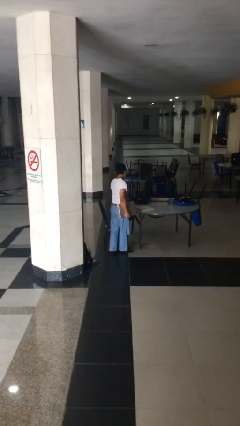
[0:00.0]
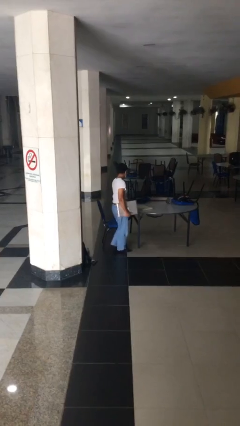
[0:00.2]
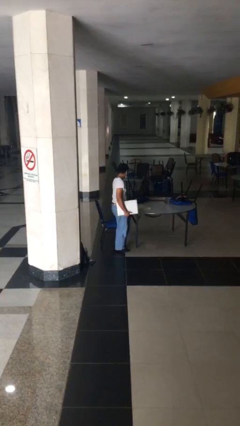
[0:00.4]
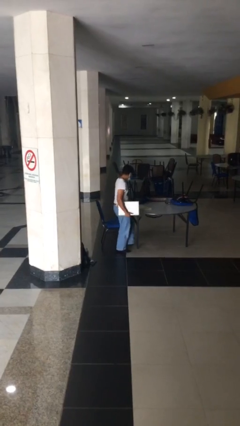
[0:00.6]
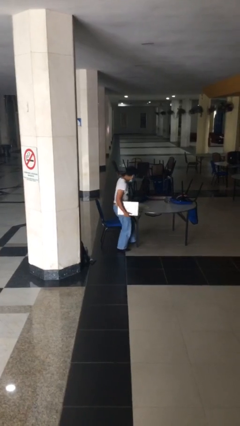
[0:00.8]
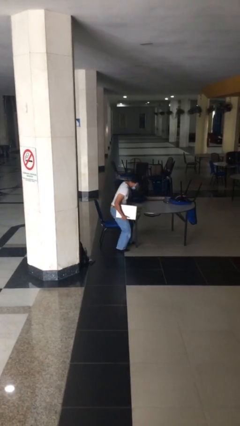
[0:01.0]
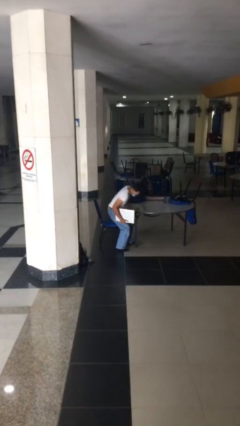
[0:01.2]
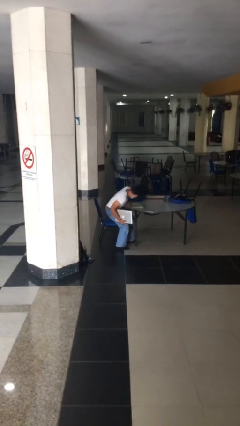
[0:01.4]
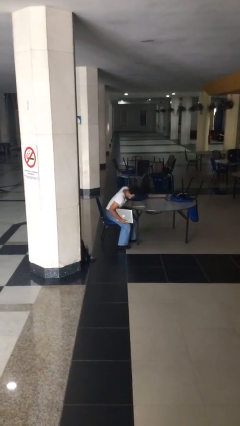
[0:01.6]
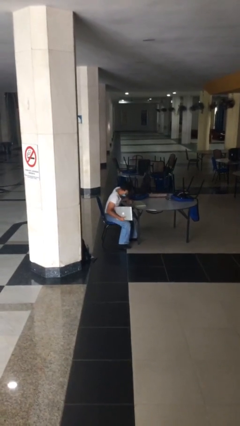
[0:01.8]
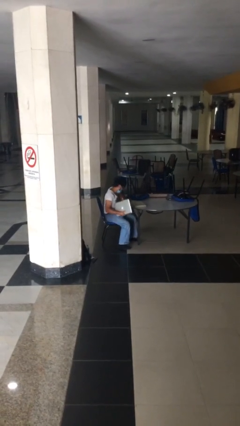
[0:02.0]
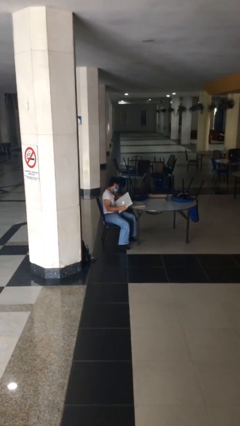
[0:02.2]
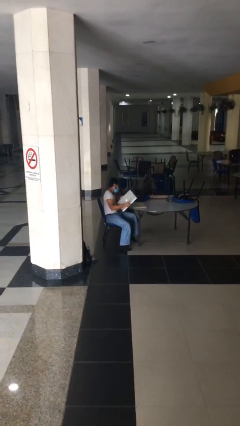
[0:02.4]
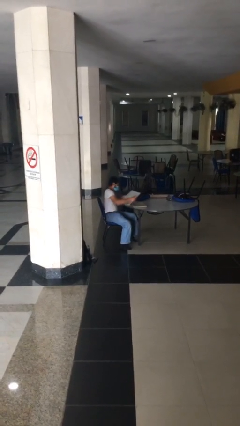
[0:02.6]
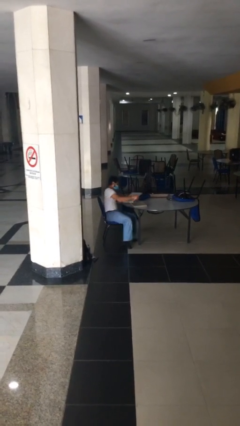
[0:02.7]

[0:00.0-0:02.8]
person sits down

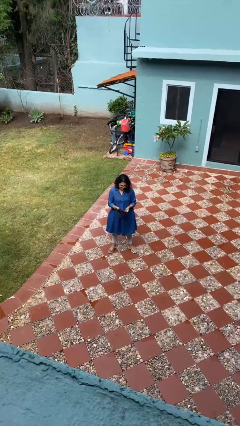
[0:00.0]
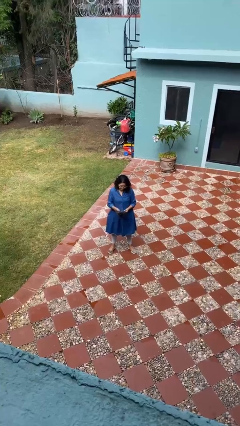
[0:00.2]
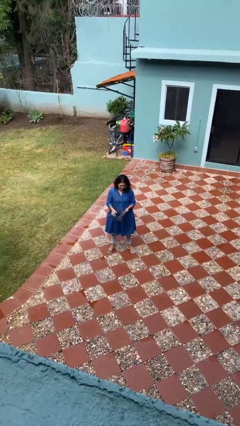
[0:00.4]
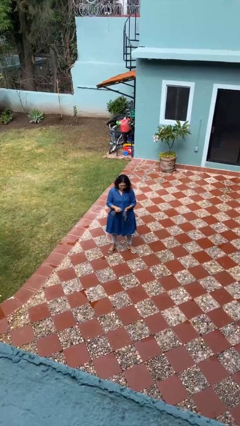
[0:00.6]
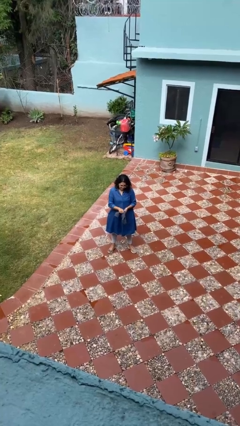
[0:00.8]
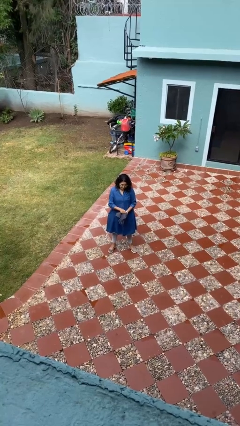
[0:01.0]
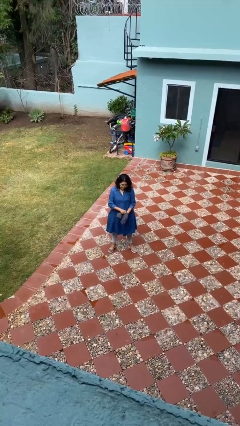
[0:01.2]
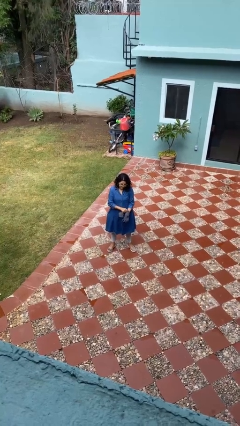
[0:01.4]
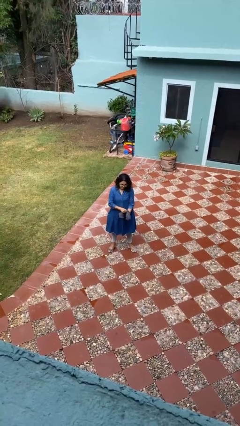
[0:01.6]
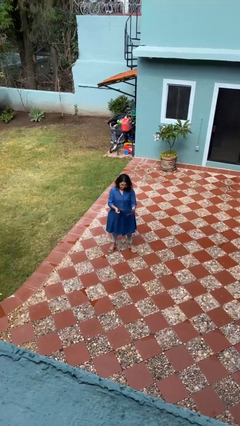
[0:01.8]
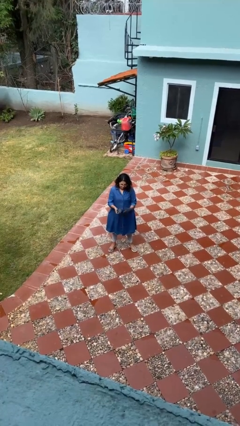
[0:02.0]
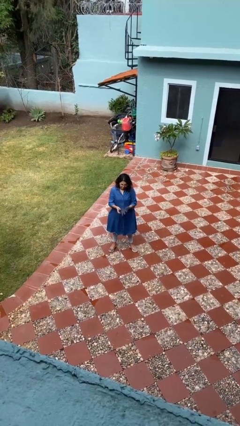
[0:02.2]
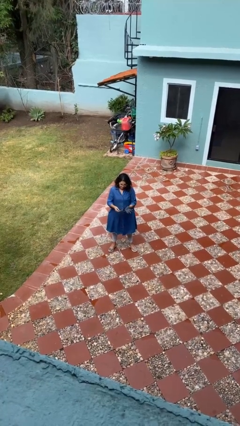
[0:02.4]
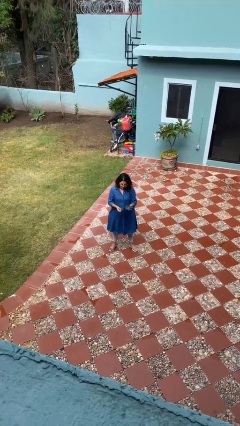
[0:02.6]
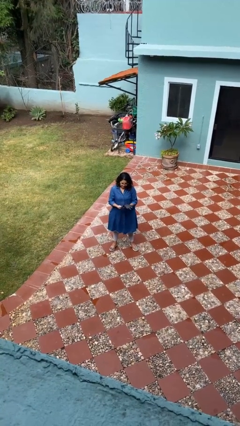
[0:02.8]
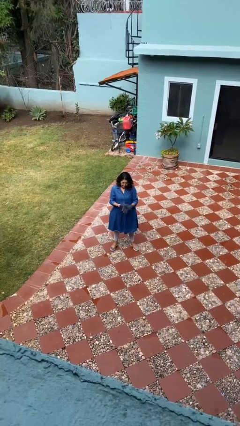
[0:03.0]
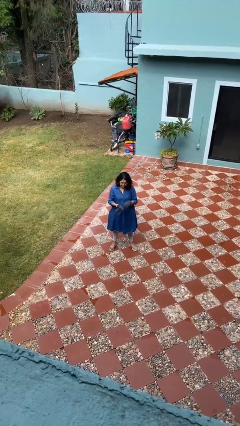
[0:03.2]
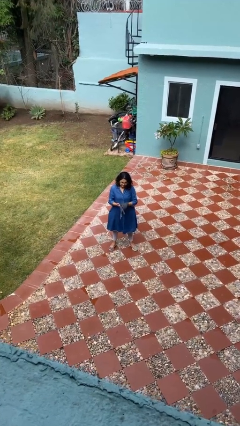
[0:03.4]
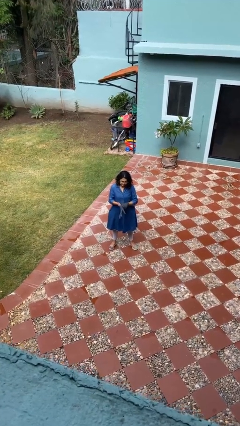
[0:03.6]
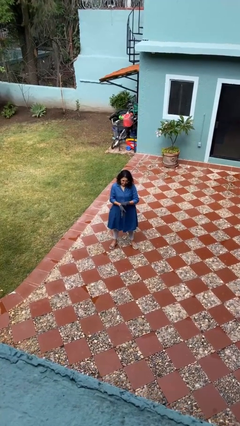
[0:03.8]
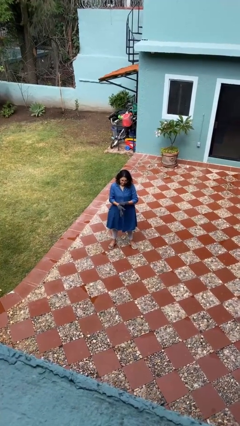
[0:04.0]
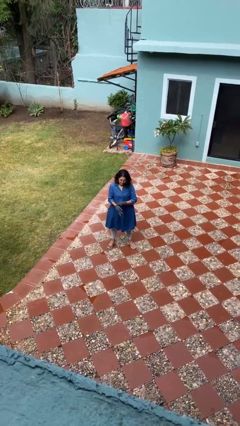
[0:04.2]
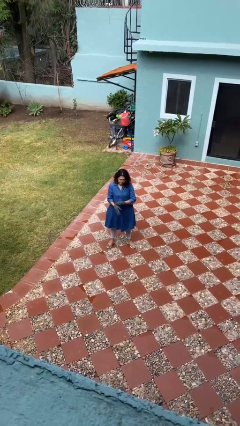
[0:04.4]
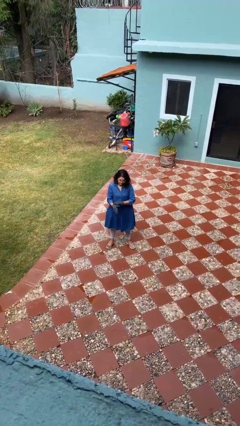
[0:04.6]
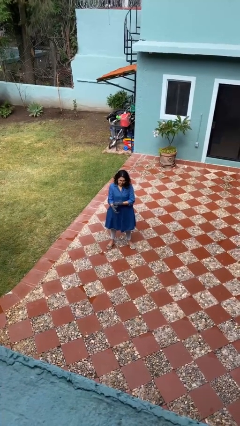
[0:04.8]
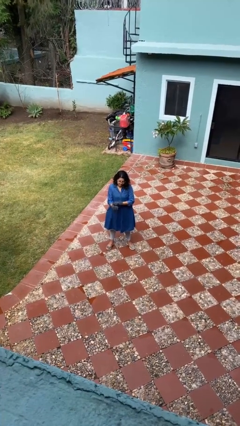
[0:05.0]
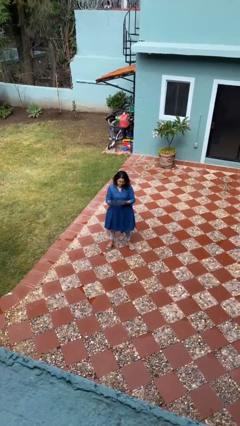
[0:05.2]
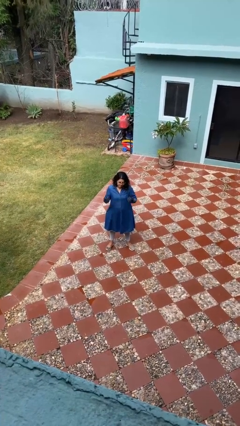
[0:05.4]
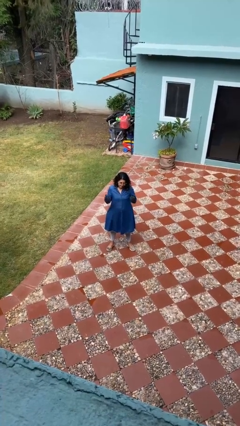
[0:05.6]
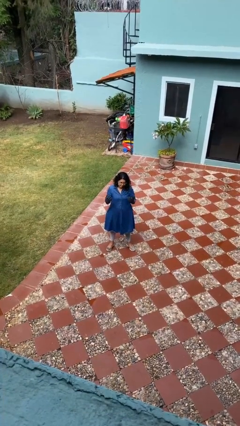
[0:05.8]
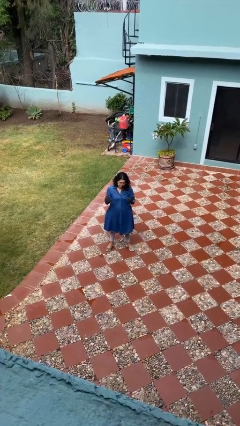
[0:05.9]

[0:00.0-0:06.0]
person puts on gloves

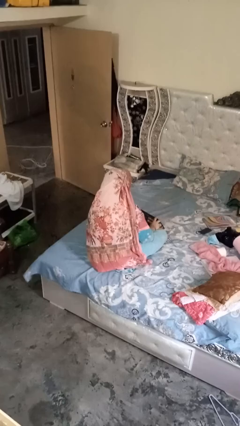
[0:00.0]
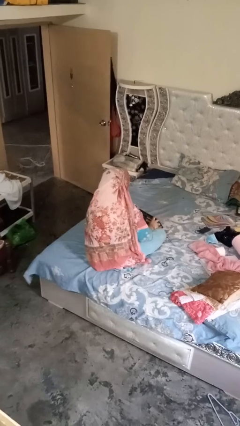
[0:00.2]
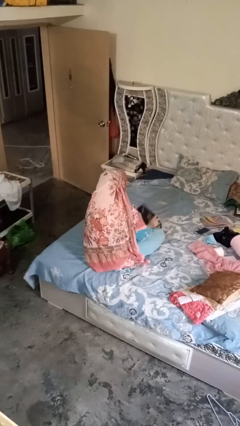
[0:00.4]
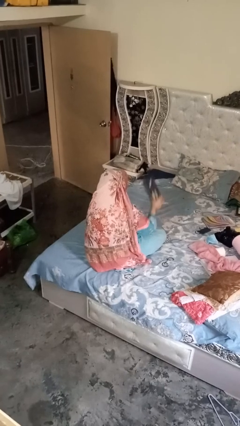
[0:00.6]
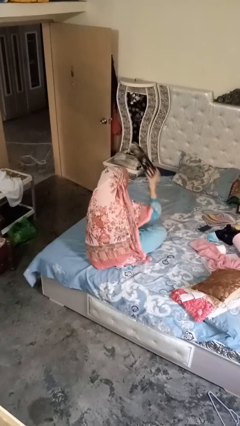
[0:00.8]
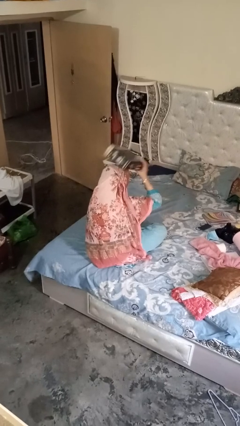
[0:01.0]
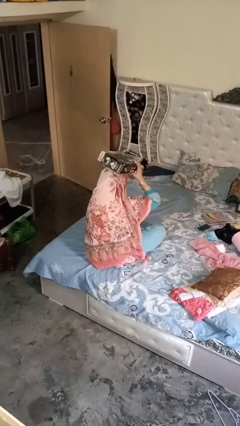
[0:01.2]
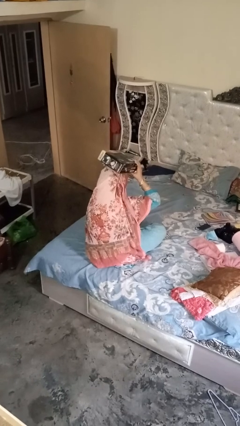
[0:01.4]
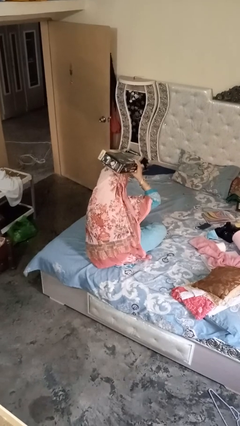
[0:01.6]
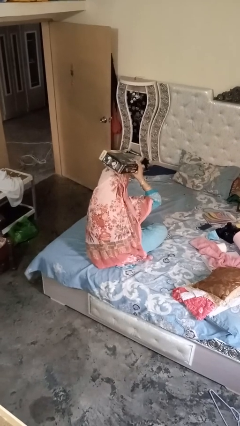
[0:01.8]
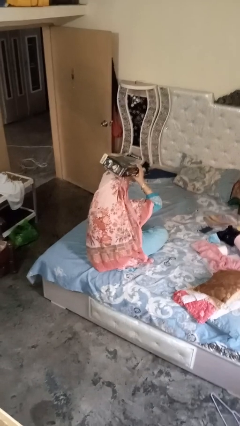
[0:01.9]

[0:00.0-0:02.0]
person holds object above head

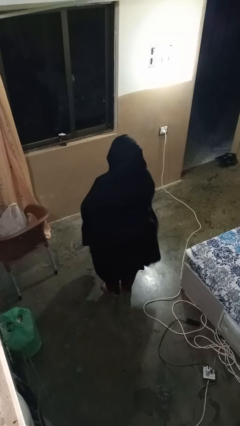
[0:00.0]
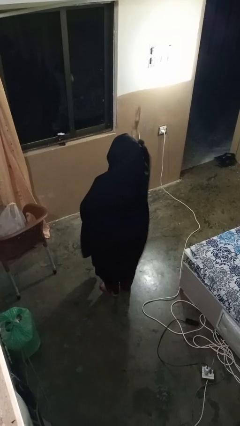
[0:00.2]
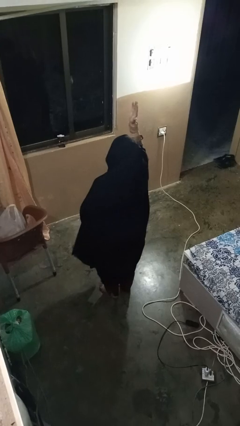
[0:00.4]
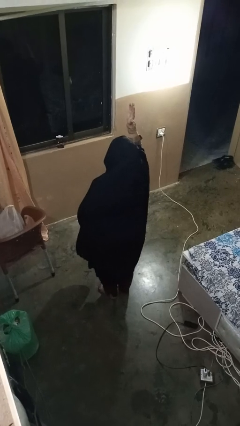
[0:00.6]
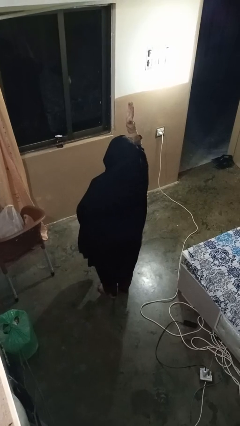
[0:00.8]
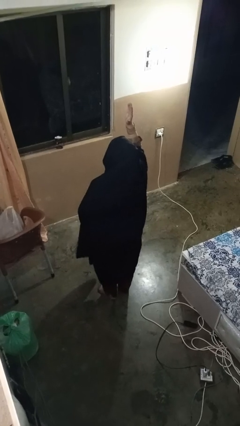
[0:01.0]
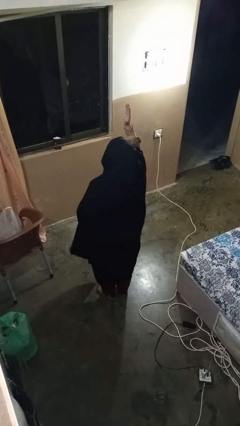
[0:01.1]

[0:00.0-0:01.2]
person gestures raise hand

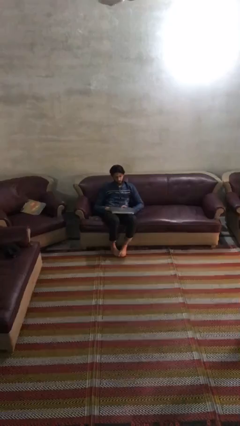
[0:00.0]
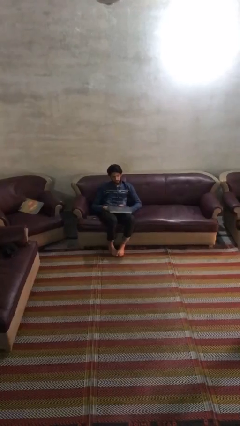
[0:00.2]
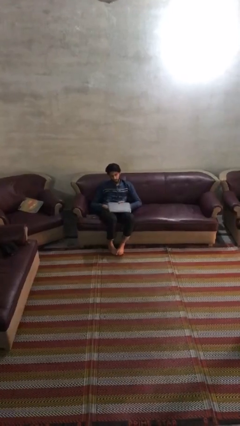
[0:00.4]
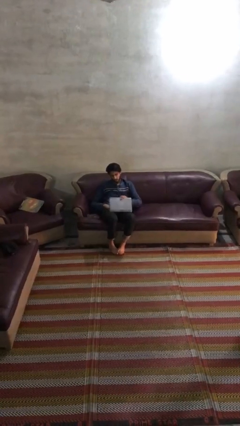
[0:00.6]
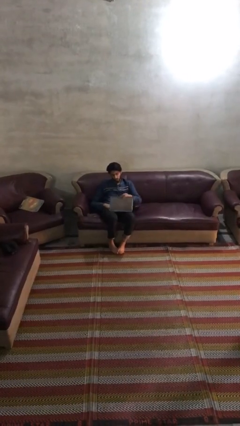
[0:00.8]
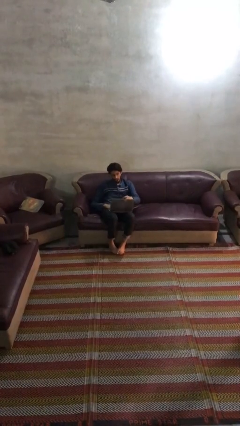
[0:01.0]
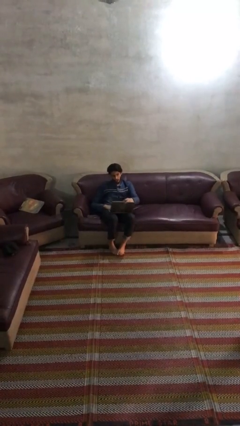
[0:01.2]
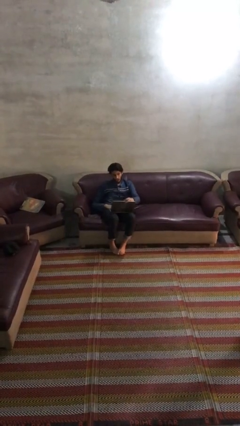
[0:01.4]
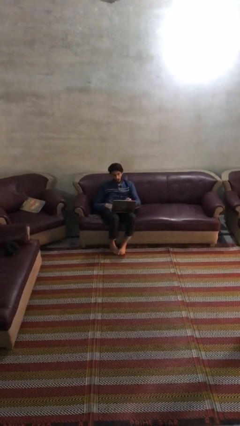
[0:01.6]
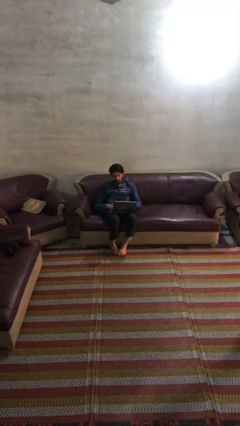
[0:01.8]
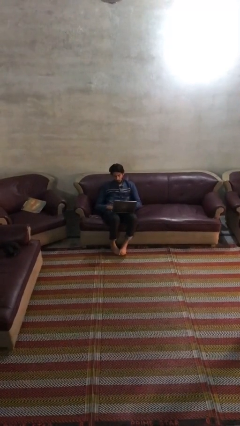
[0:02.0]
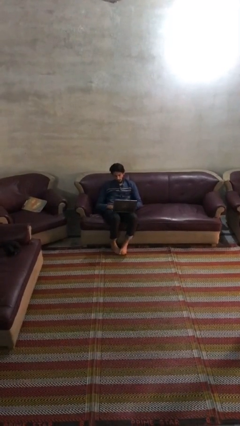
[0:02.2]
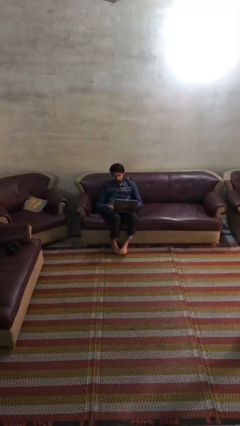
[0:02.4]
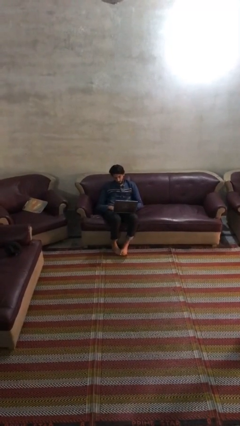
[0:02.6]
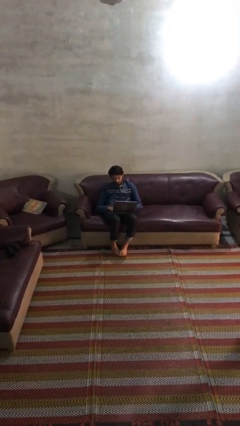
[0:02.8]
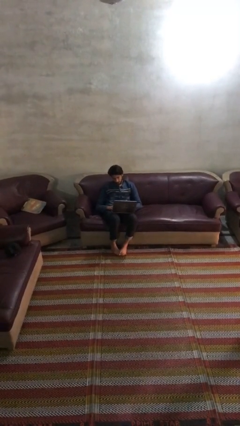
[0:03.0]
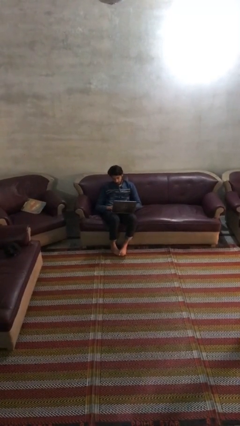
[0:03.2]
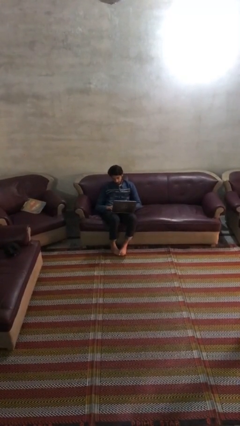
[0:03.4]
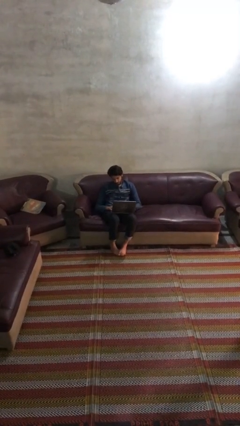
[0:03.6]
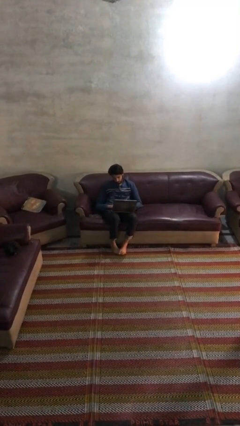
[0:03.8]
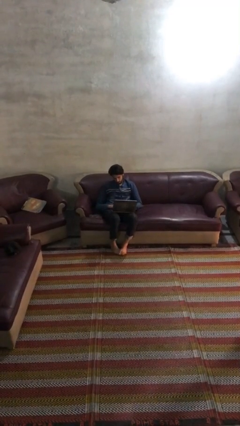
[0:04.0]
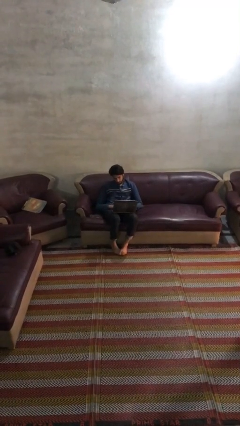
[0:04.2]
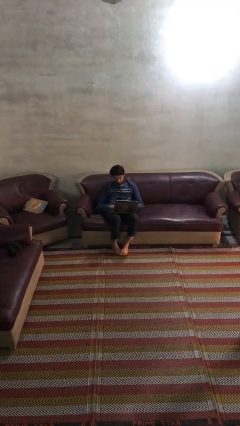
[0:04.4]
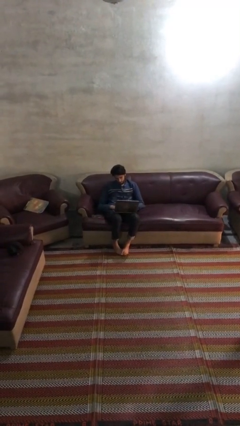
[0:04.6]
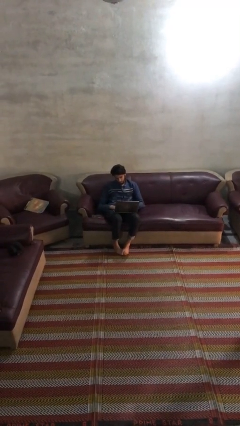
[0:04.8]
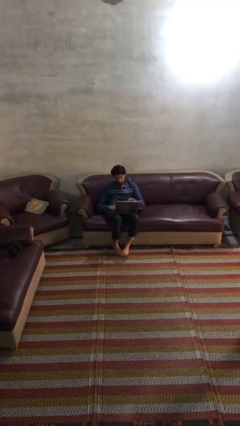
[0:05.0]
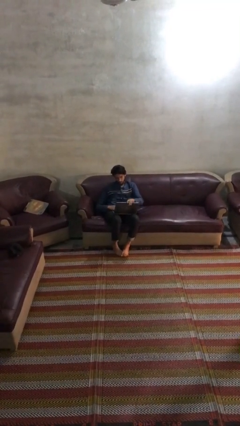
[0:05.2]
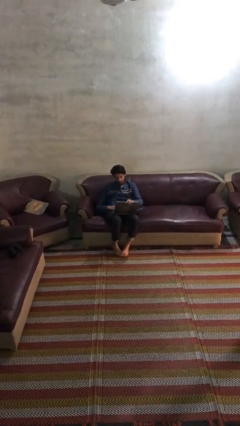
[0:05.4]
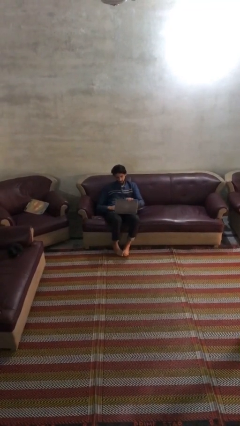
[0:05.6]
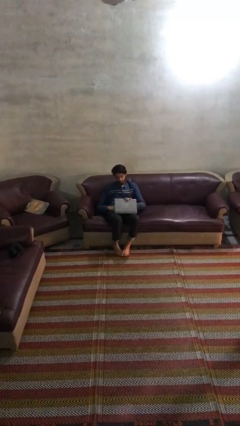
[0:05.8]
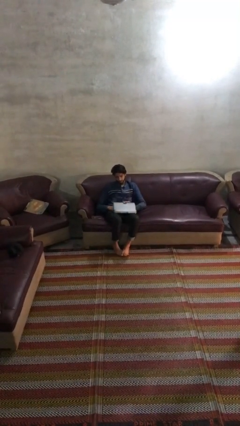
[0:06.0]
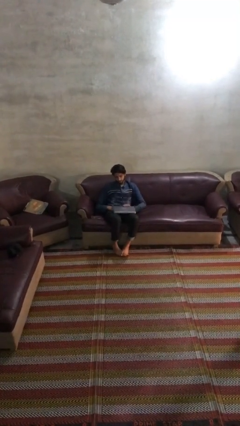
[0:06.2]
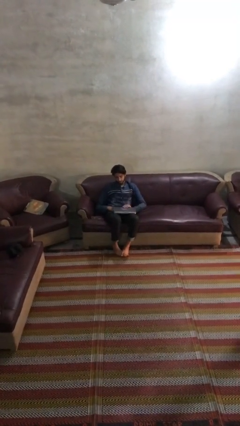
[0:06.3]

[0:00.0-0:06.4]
person interacts with laptop
